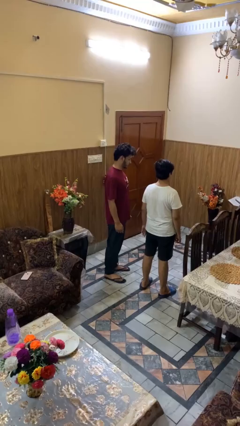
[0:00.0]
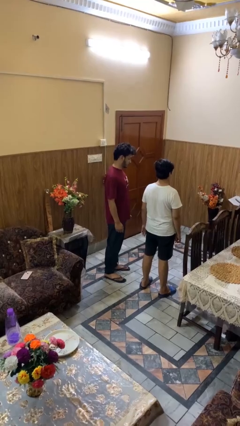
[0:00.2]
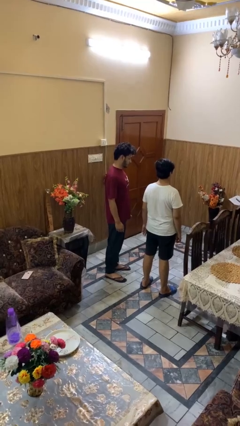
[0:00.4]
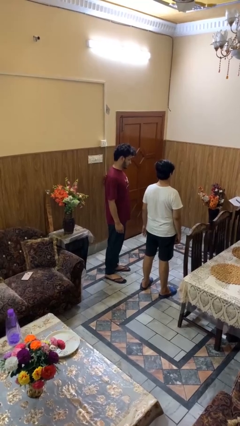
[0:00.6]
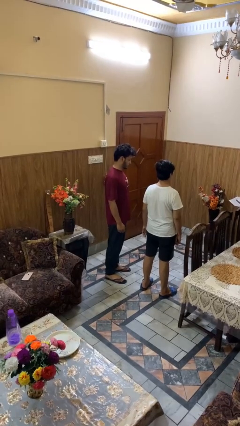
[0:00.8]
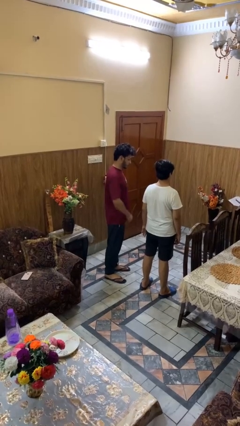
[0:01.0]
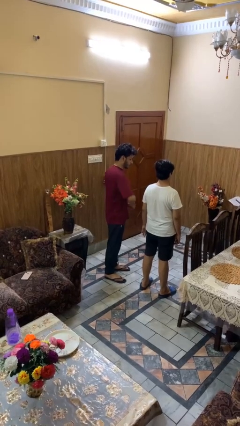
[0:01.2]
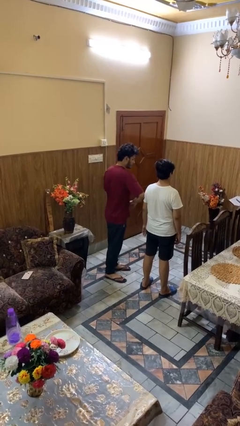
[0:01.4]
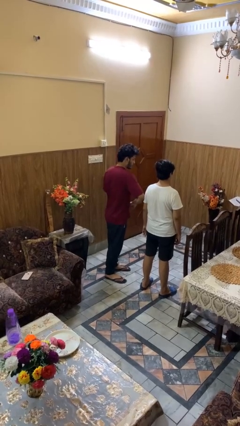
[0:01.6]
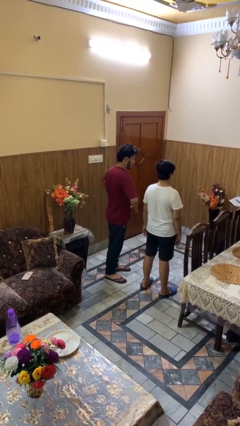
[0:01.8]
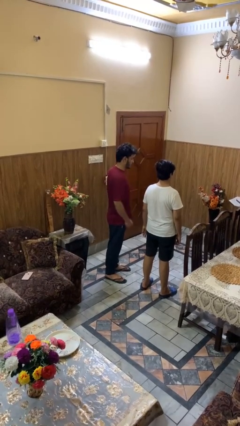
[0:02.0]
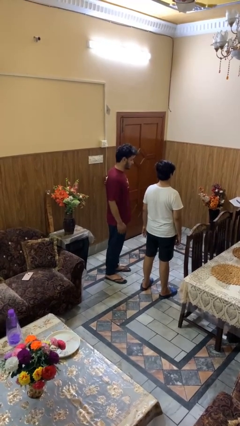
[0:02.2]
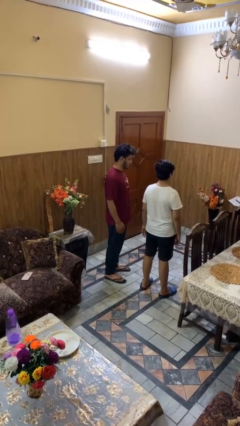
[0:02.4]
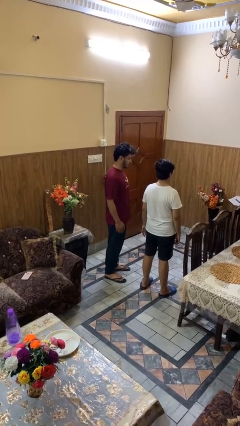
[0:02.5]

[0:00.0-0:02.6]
person nudges person with elbow

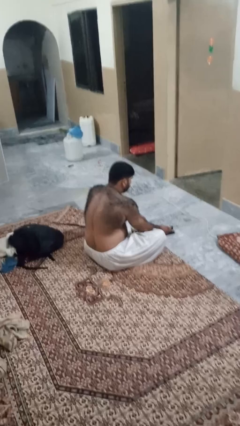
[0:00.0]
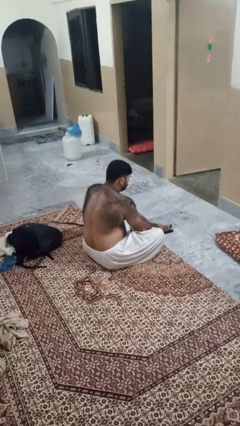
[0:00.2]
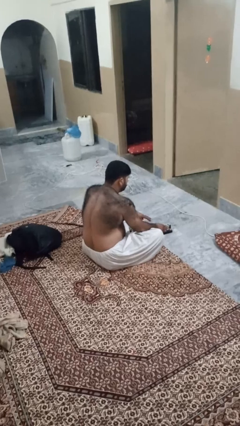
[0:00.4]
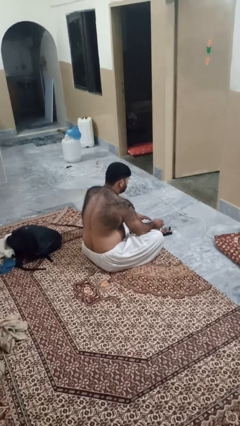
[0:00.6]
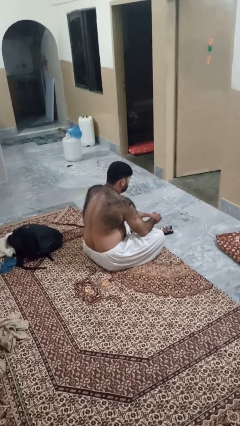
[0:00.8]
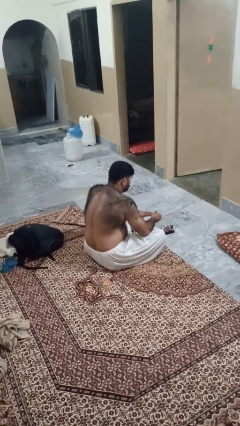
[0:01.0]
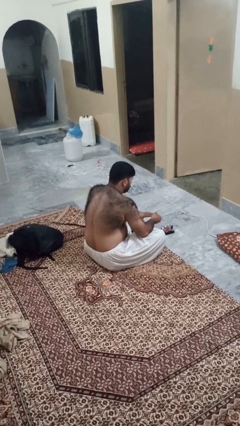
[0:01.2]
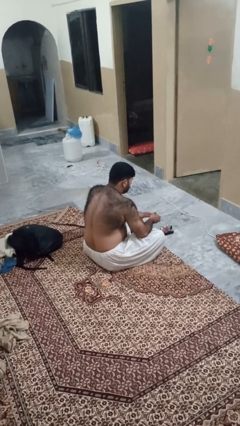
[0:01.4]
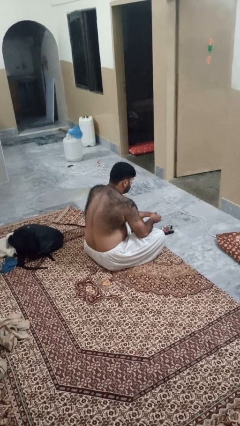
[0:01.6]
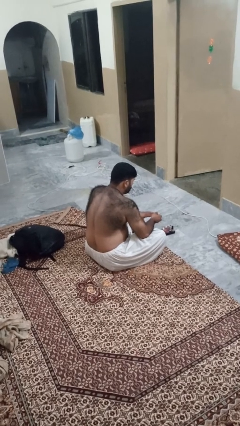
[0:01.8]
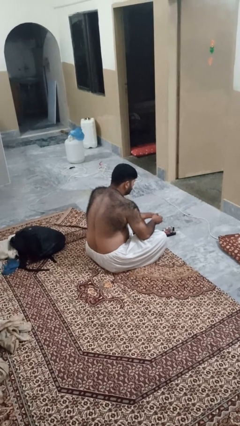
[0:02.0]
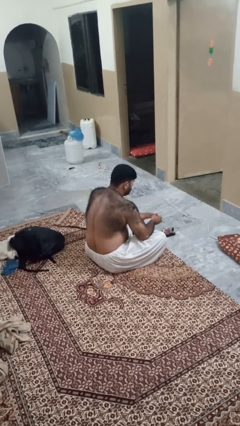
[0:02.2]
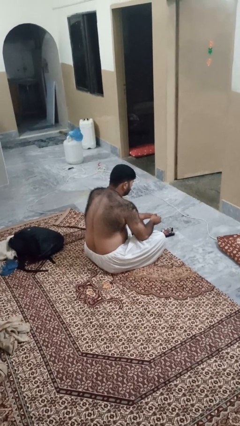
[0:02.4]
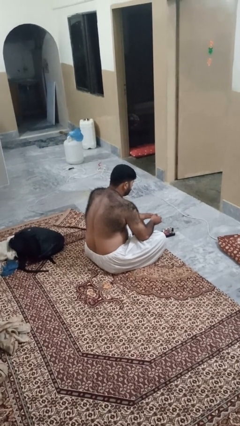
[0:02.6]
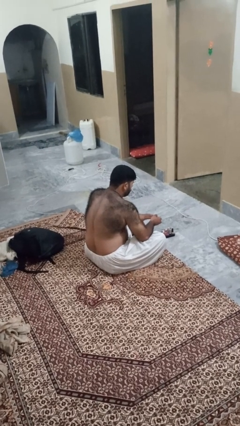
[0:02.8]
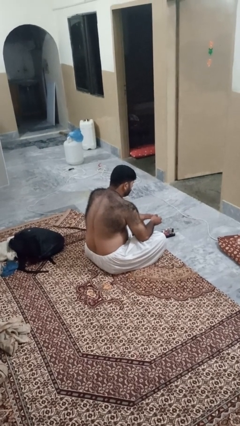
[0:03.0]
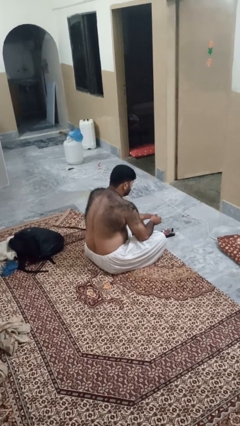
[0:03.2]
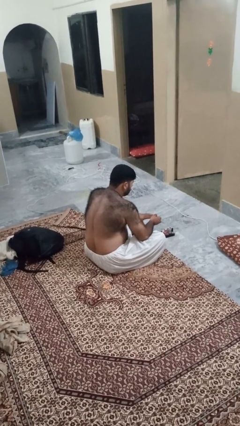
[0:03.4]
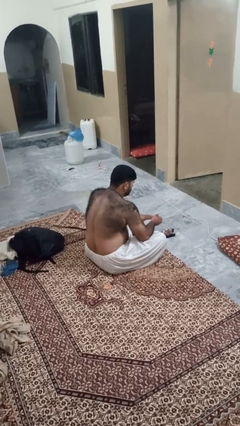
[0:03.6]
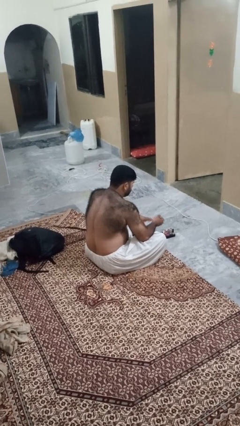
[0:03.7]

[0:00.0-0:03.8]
person paints fingernails

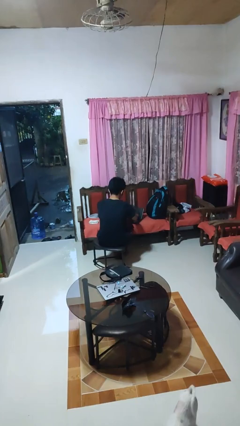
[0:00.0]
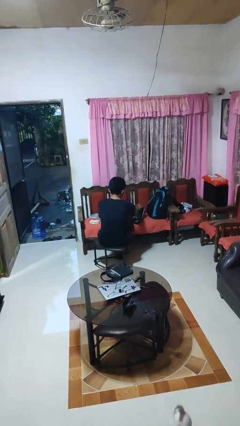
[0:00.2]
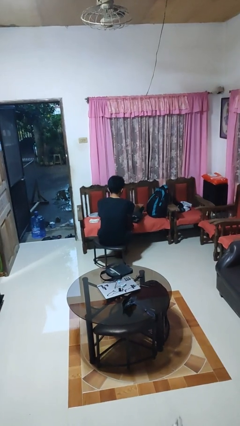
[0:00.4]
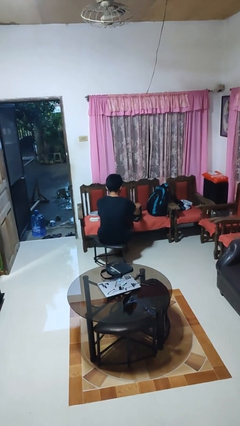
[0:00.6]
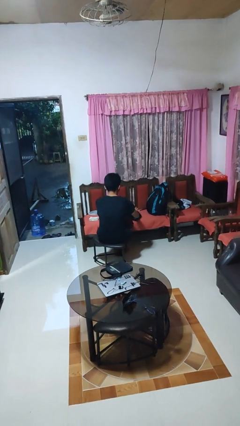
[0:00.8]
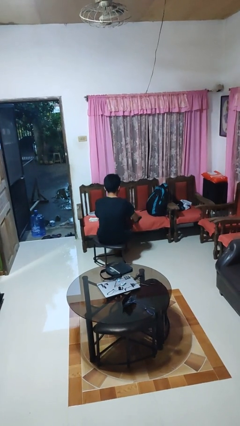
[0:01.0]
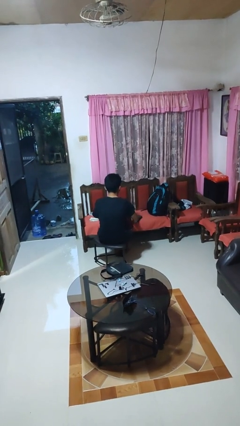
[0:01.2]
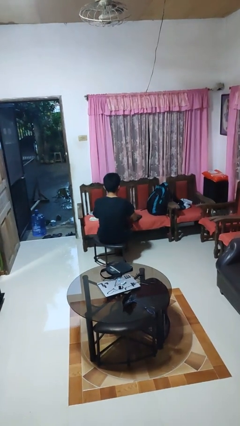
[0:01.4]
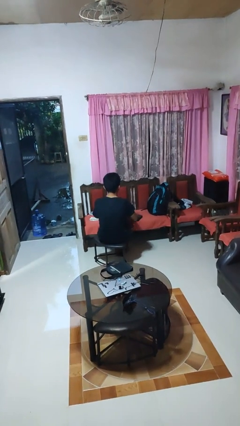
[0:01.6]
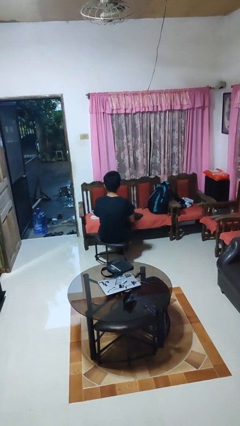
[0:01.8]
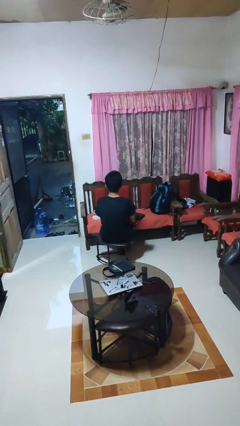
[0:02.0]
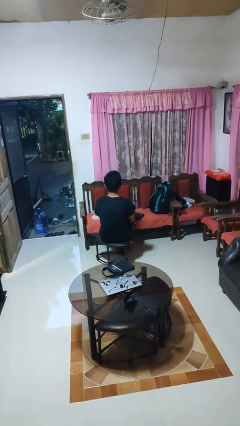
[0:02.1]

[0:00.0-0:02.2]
person closes laptop

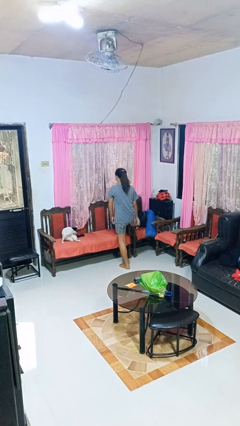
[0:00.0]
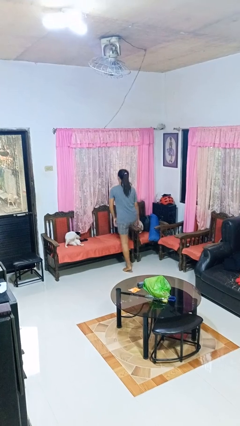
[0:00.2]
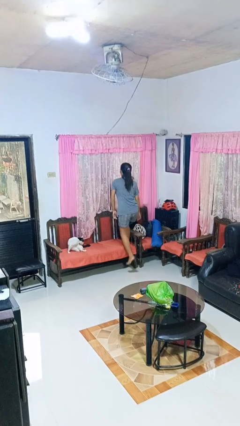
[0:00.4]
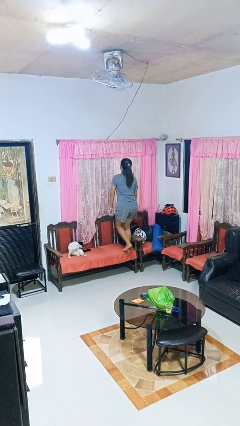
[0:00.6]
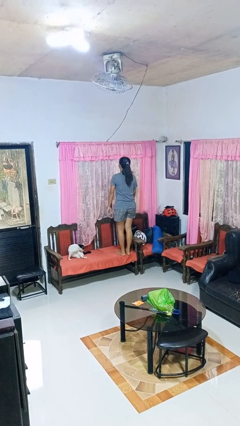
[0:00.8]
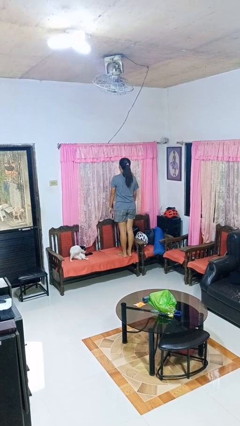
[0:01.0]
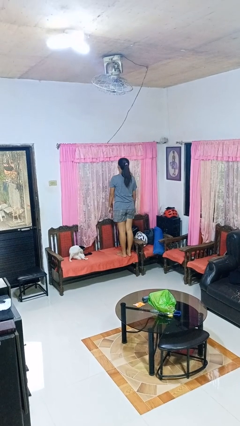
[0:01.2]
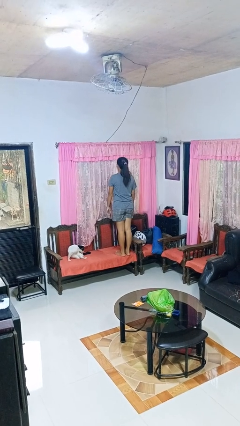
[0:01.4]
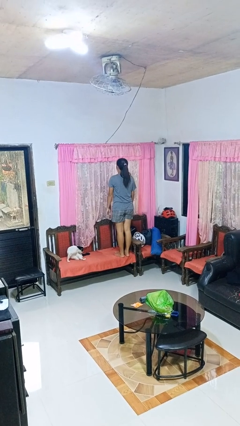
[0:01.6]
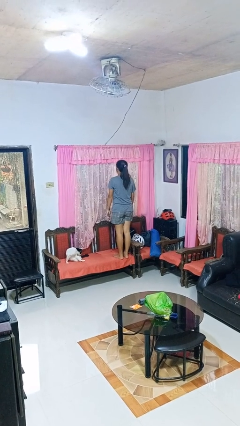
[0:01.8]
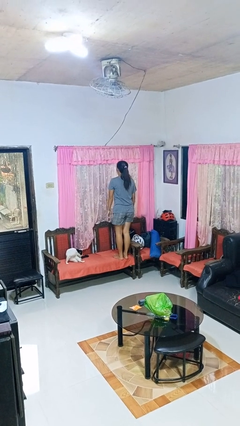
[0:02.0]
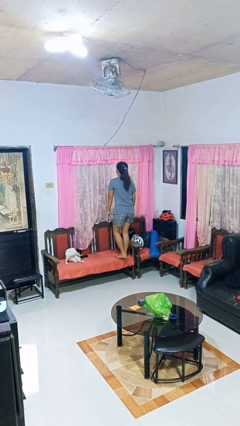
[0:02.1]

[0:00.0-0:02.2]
person climbs on chair

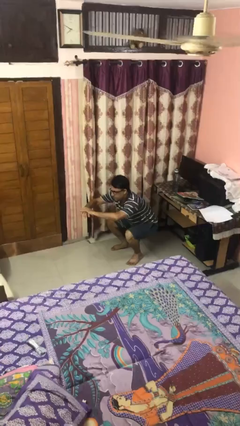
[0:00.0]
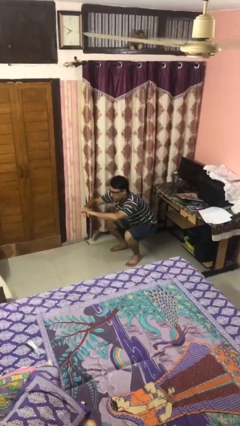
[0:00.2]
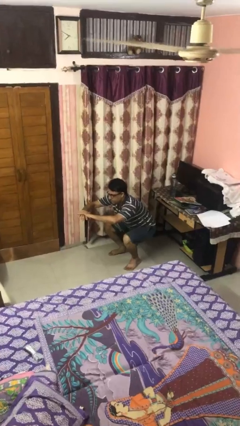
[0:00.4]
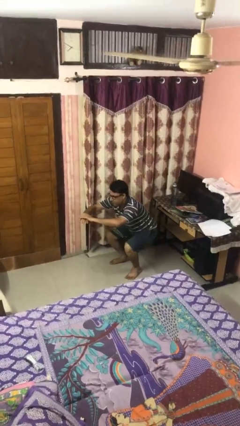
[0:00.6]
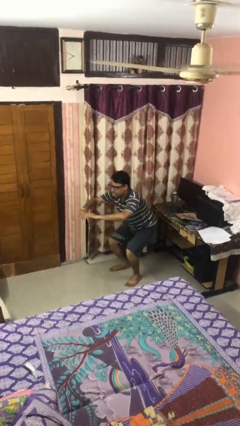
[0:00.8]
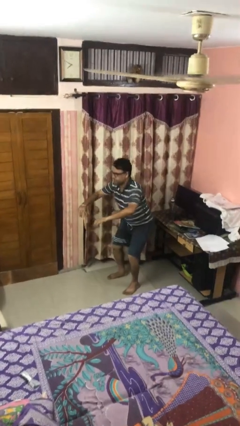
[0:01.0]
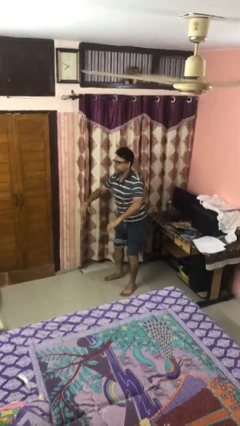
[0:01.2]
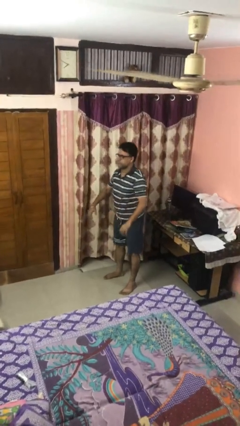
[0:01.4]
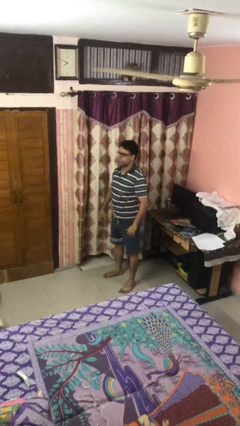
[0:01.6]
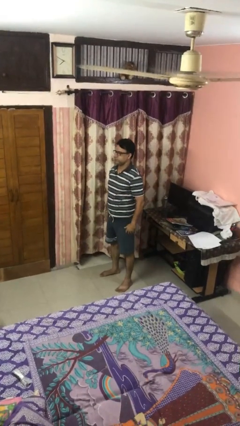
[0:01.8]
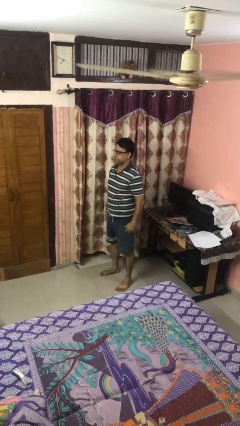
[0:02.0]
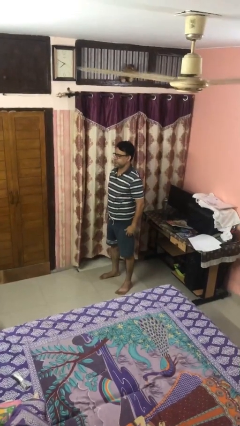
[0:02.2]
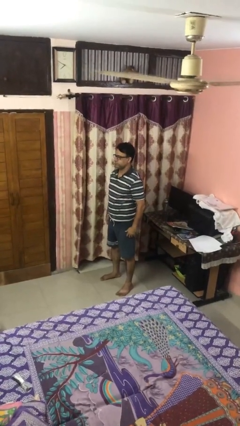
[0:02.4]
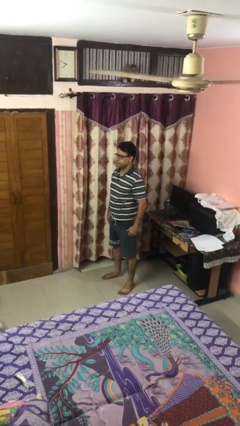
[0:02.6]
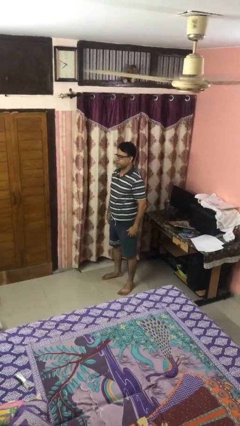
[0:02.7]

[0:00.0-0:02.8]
person stands up

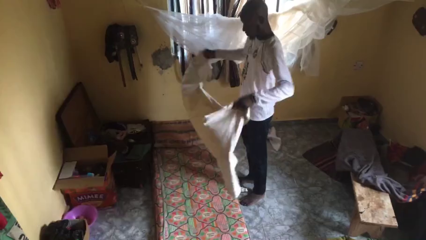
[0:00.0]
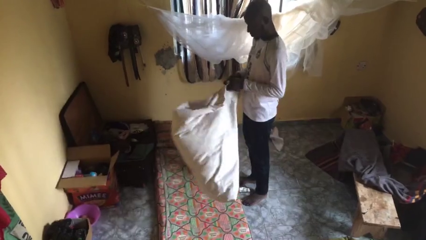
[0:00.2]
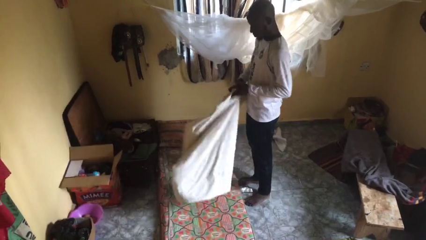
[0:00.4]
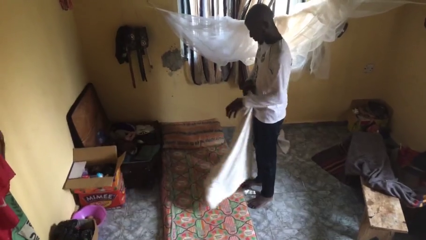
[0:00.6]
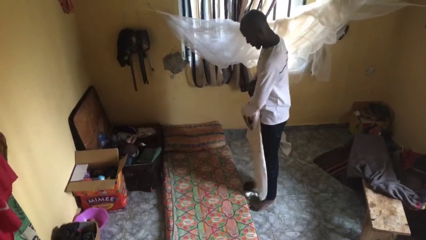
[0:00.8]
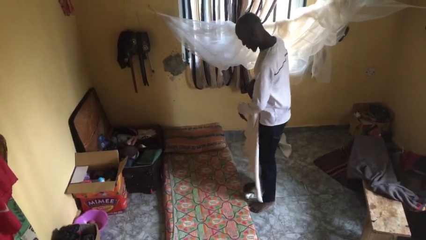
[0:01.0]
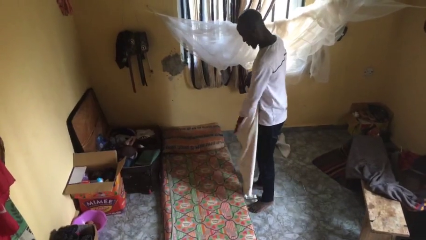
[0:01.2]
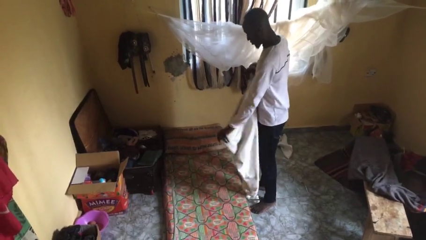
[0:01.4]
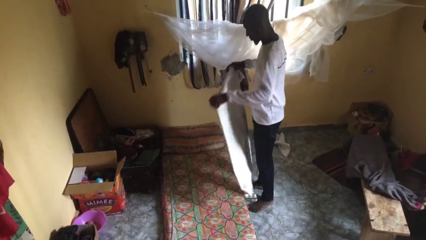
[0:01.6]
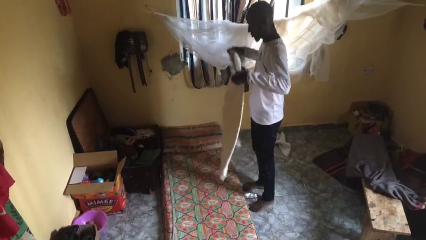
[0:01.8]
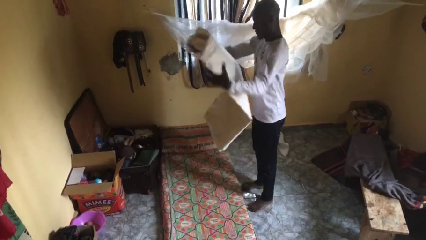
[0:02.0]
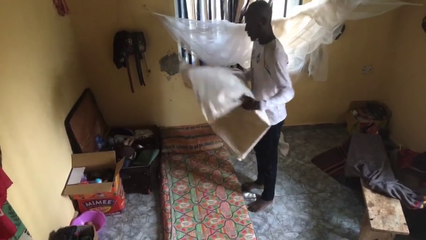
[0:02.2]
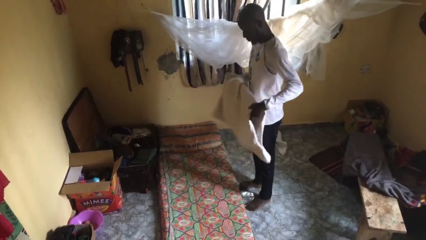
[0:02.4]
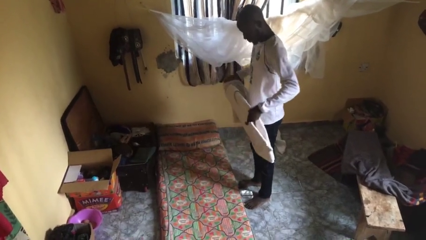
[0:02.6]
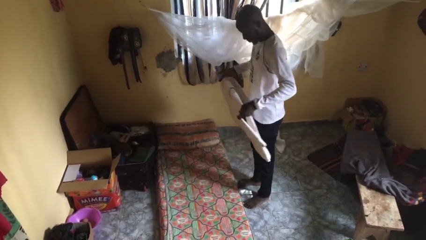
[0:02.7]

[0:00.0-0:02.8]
person folds blanket

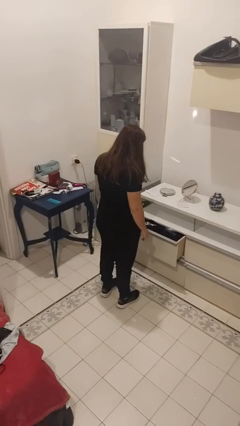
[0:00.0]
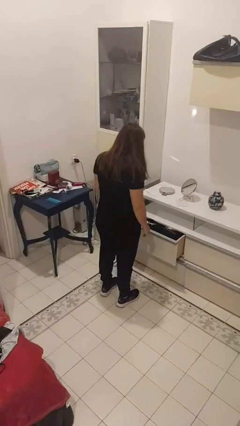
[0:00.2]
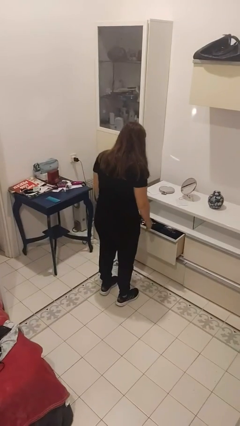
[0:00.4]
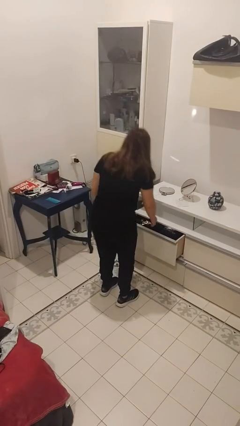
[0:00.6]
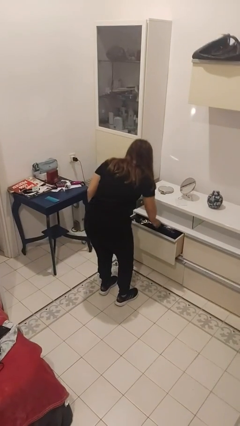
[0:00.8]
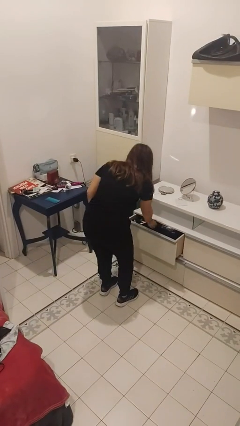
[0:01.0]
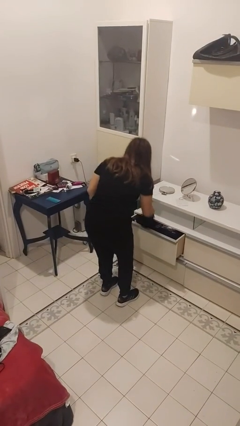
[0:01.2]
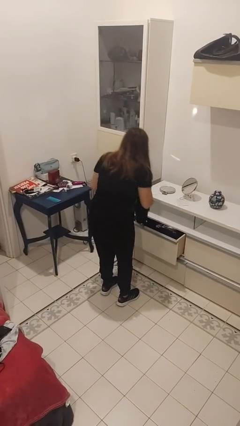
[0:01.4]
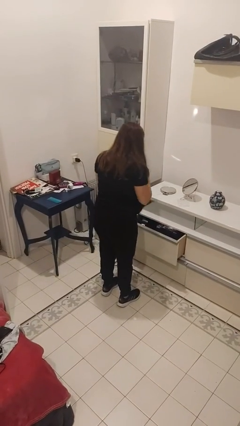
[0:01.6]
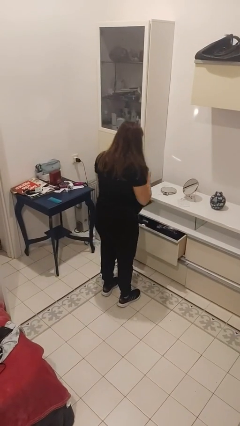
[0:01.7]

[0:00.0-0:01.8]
person takes clothes from dresser
